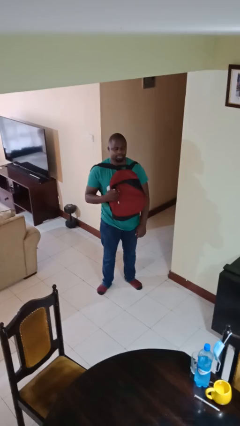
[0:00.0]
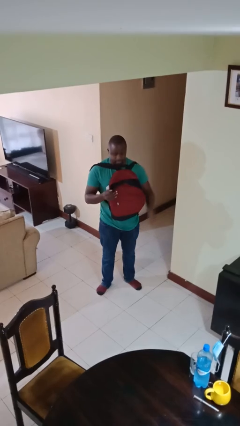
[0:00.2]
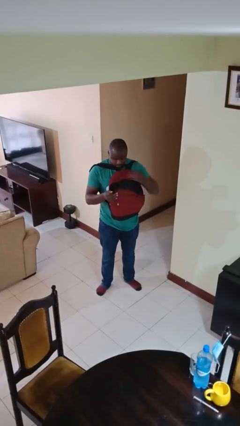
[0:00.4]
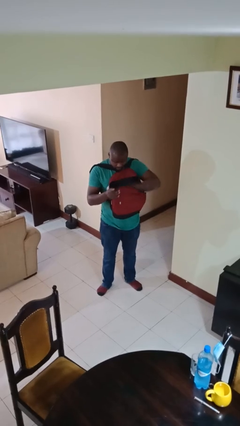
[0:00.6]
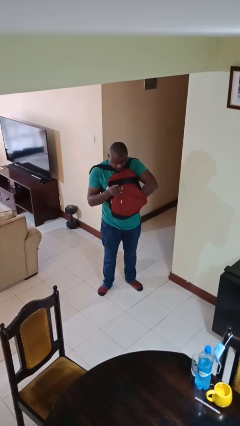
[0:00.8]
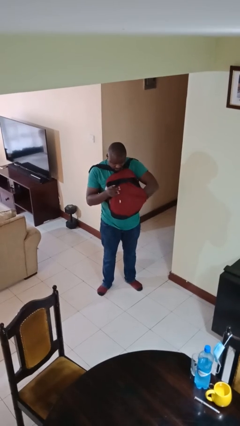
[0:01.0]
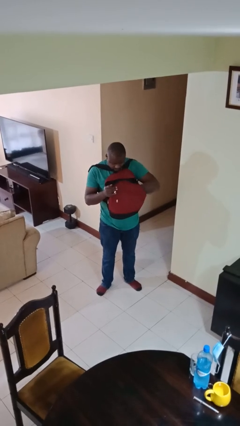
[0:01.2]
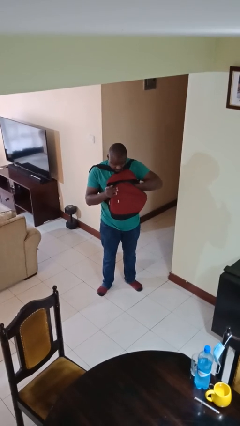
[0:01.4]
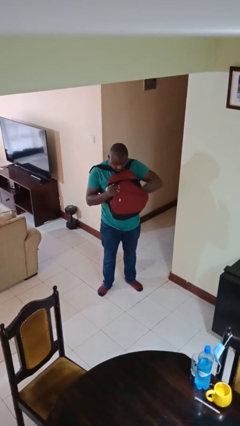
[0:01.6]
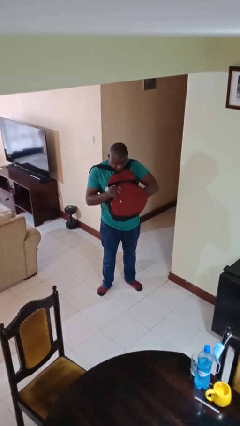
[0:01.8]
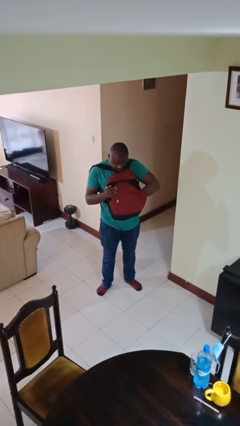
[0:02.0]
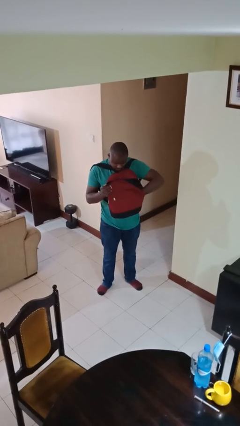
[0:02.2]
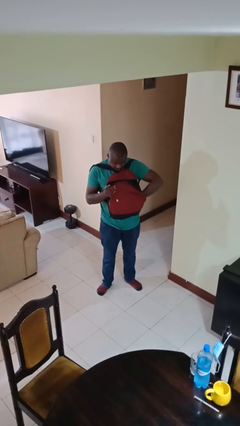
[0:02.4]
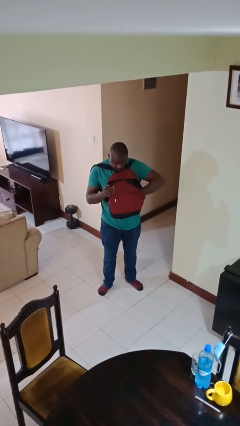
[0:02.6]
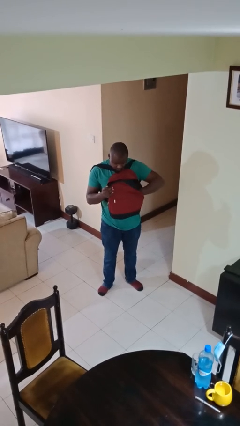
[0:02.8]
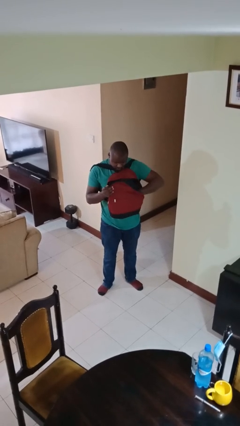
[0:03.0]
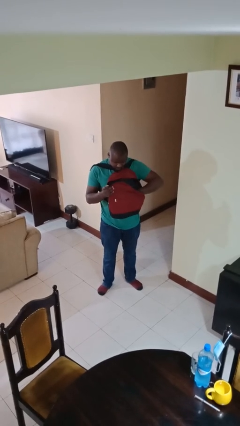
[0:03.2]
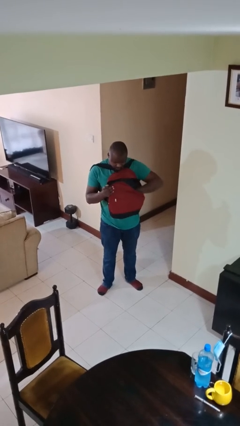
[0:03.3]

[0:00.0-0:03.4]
person searches in backpack

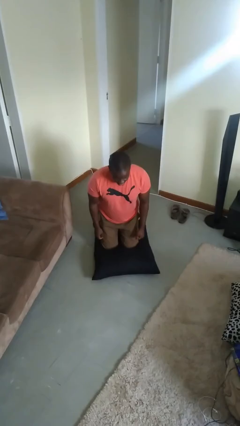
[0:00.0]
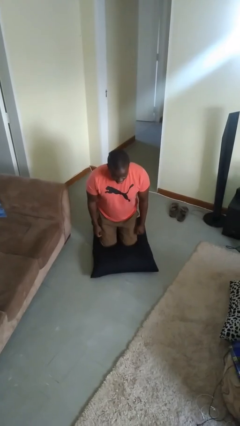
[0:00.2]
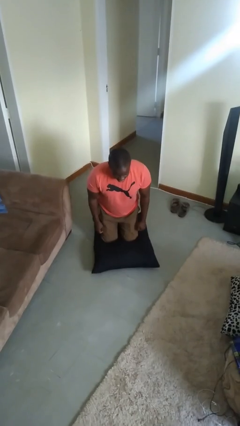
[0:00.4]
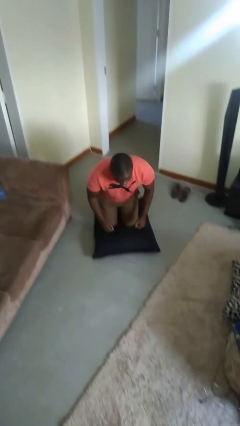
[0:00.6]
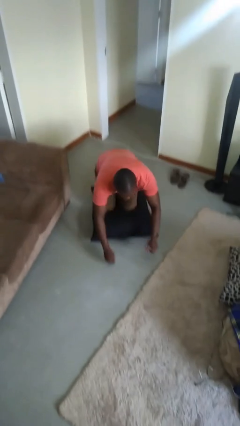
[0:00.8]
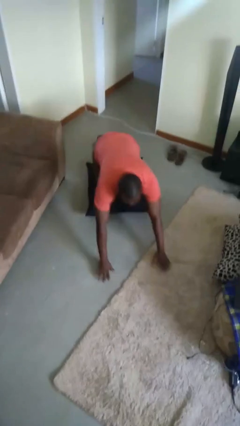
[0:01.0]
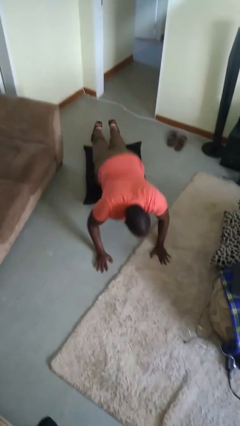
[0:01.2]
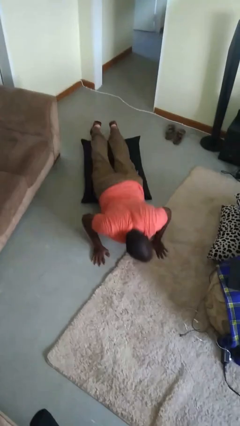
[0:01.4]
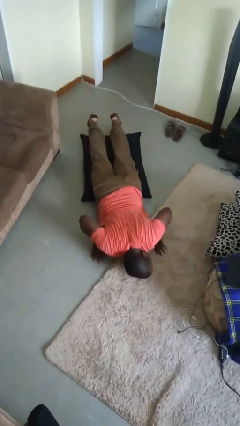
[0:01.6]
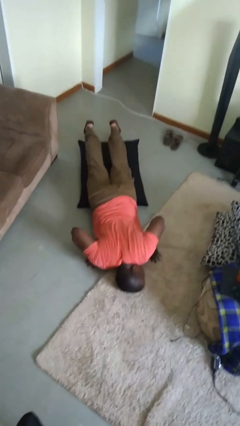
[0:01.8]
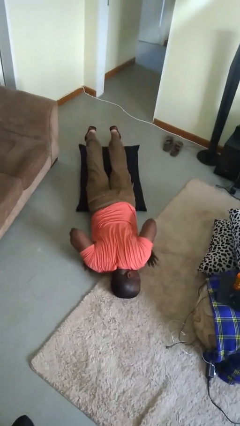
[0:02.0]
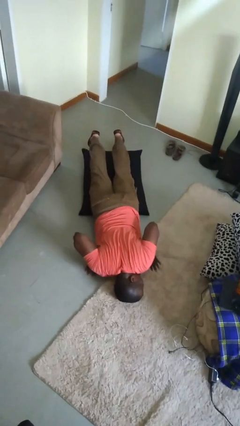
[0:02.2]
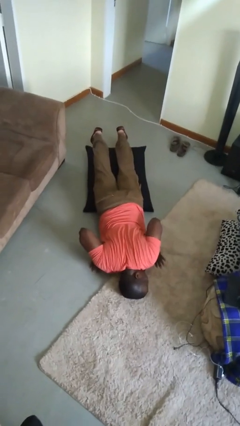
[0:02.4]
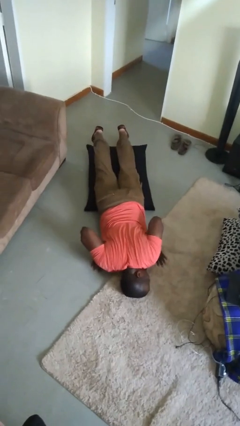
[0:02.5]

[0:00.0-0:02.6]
person lies down on floor

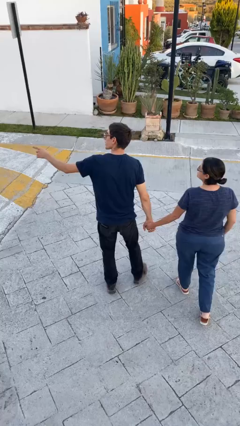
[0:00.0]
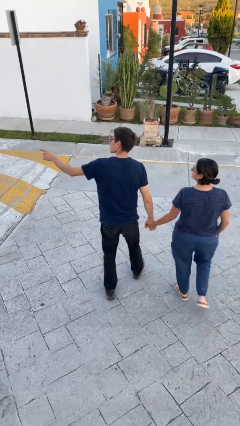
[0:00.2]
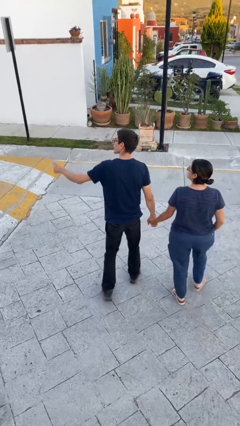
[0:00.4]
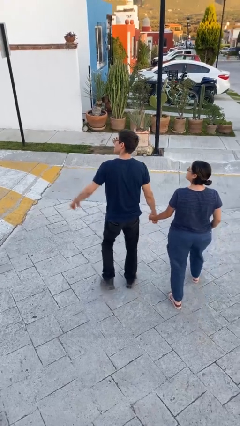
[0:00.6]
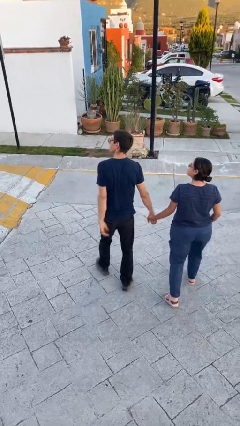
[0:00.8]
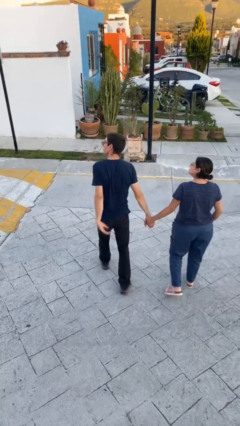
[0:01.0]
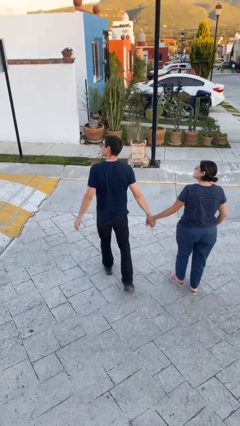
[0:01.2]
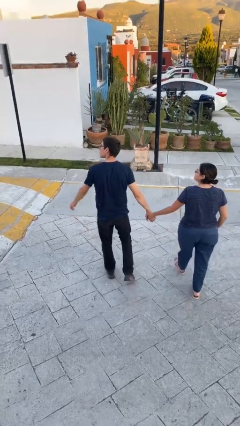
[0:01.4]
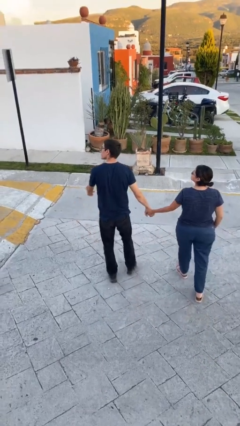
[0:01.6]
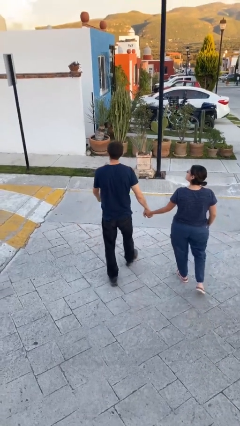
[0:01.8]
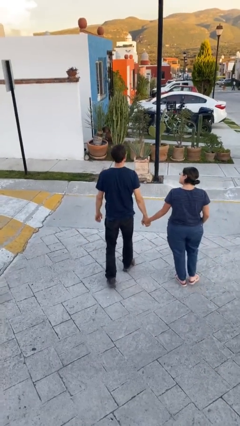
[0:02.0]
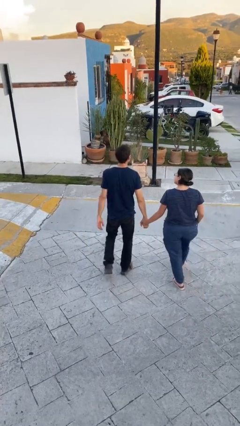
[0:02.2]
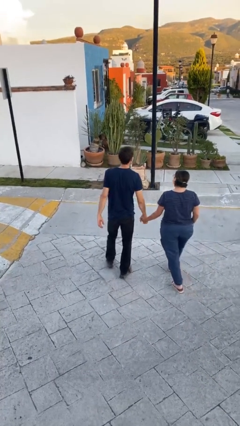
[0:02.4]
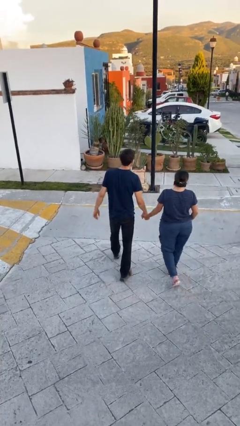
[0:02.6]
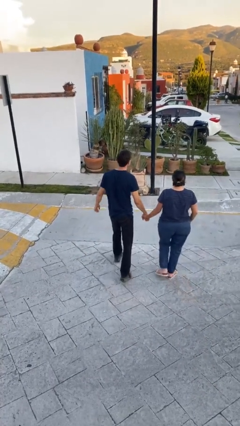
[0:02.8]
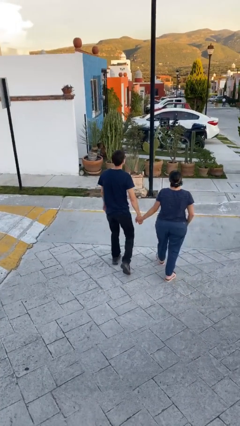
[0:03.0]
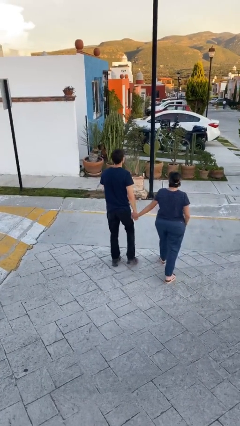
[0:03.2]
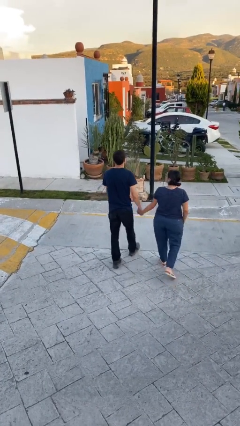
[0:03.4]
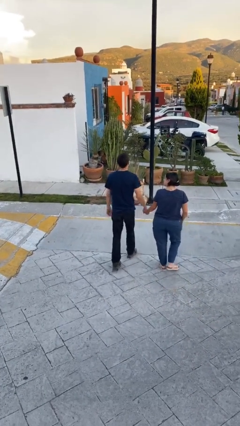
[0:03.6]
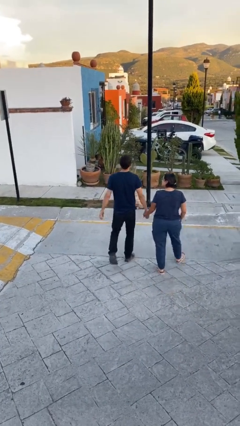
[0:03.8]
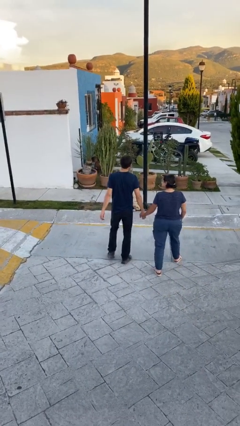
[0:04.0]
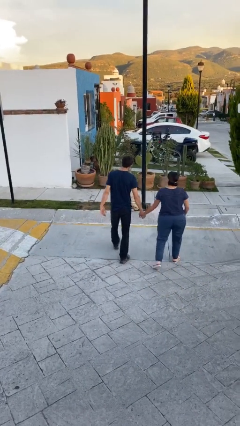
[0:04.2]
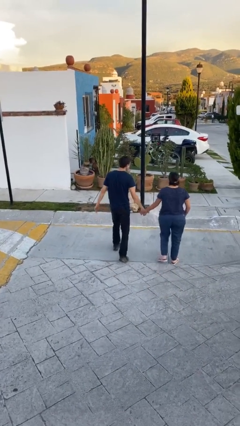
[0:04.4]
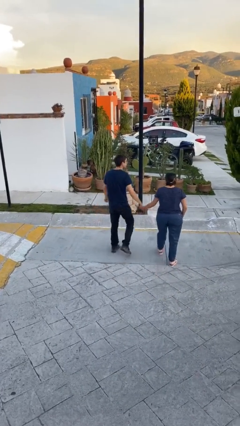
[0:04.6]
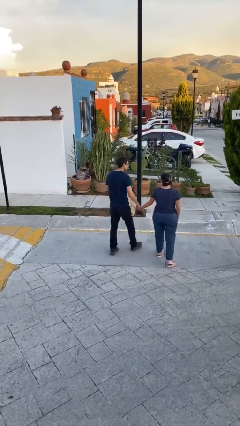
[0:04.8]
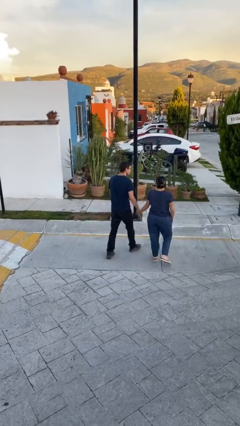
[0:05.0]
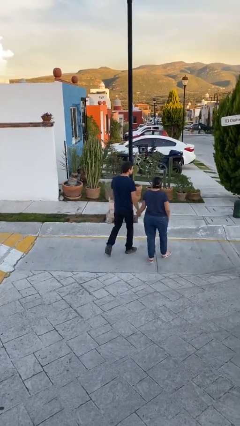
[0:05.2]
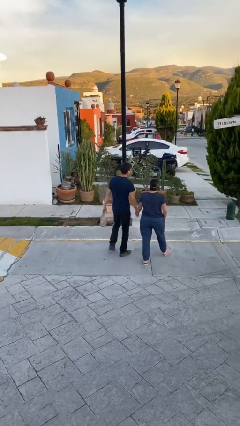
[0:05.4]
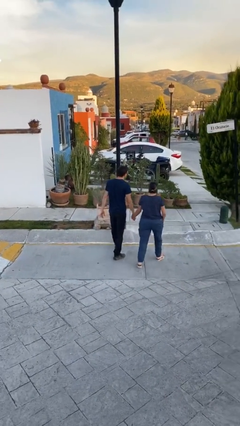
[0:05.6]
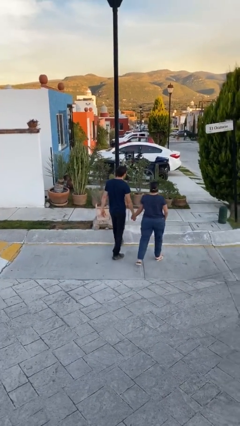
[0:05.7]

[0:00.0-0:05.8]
person holds hand

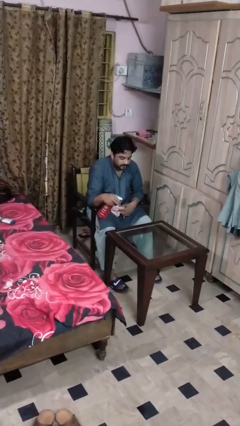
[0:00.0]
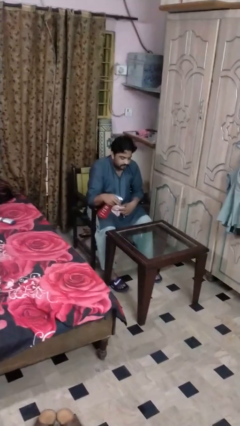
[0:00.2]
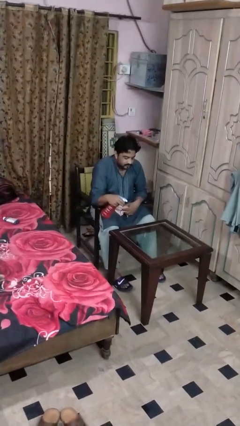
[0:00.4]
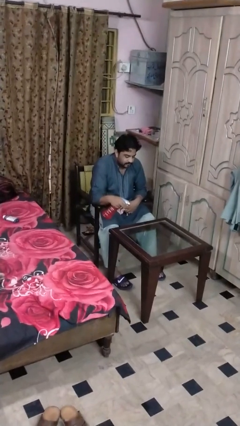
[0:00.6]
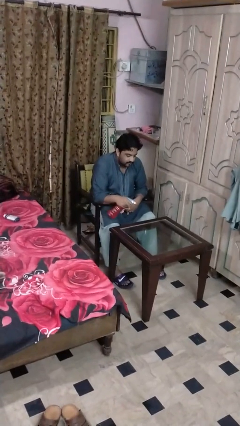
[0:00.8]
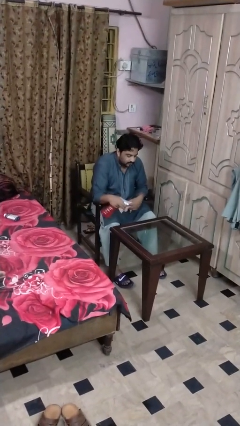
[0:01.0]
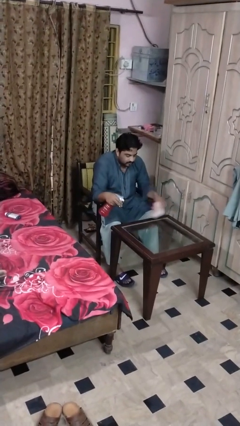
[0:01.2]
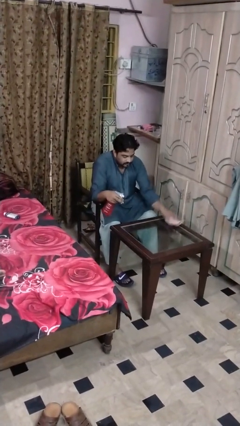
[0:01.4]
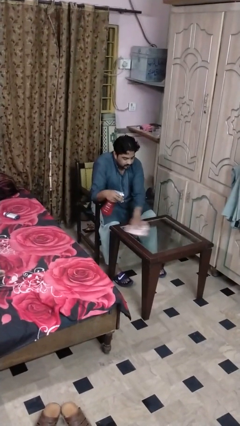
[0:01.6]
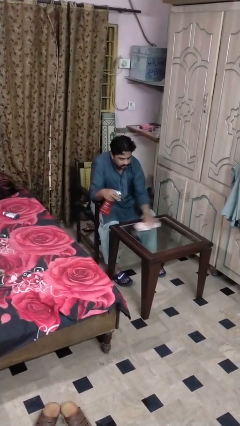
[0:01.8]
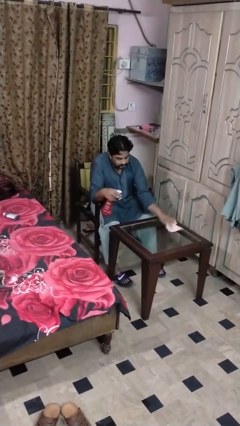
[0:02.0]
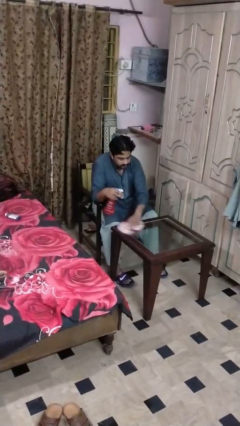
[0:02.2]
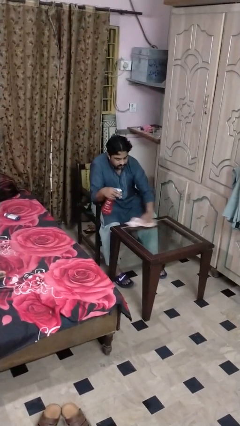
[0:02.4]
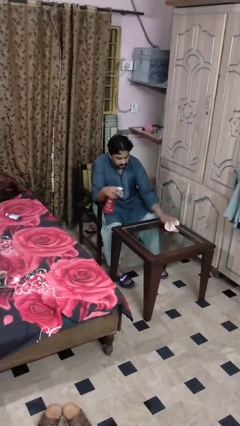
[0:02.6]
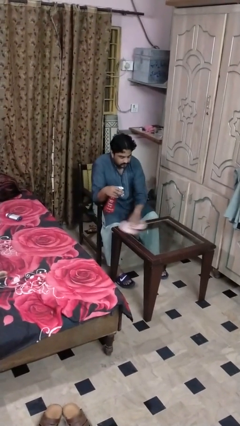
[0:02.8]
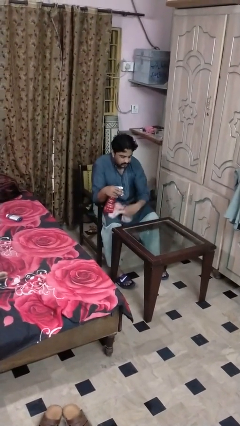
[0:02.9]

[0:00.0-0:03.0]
person cleans table with rag

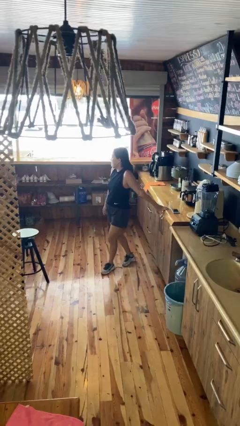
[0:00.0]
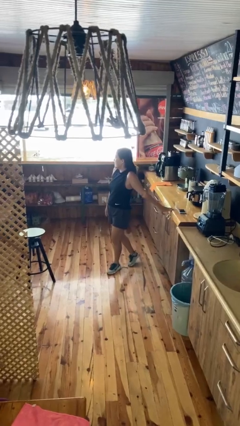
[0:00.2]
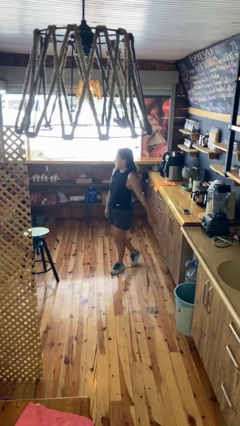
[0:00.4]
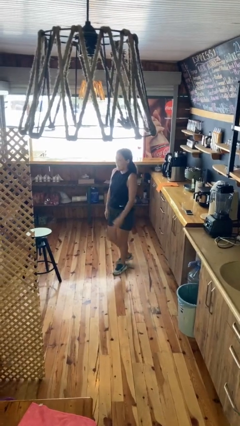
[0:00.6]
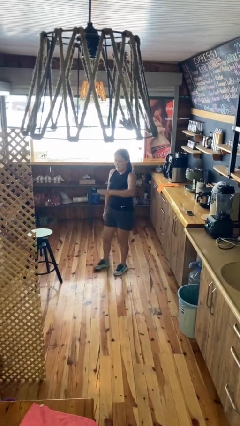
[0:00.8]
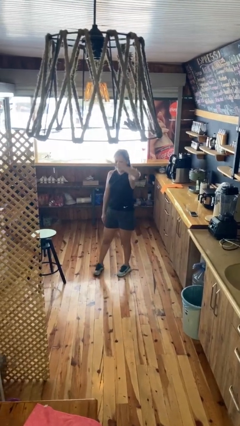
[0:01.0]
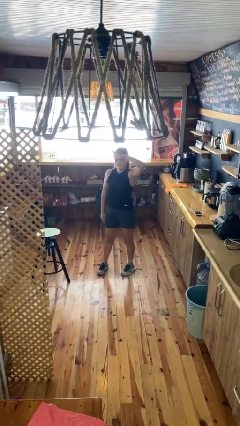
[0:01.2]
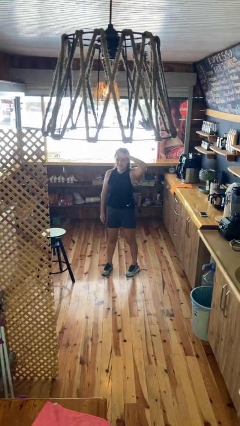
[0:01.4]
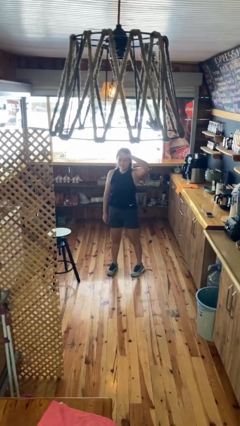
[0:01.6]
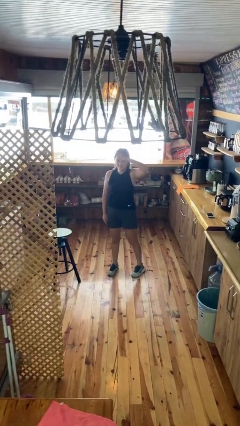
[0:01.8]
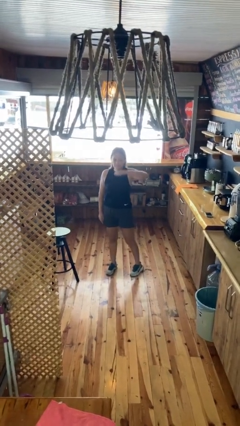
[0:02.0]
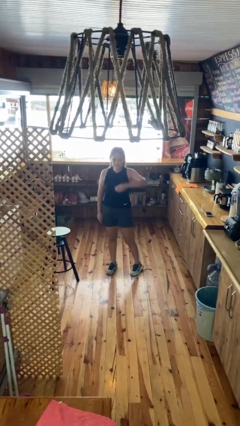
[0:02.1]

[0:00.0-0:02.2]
person salutes

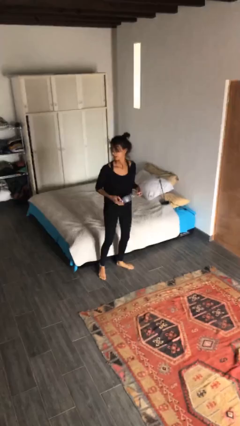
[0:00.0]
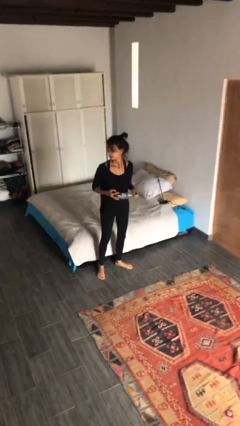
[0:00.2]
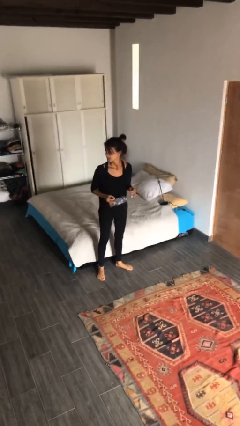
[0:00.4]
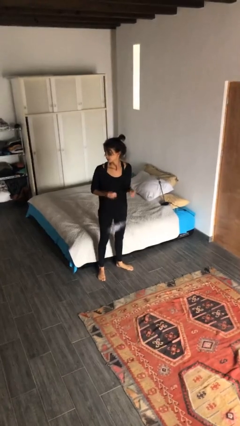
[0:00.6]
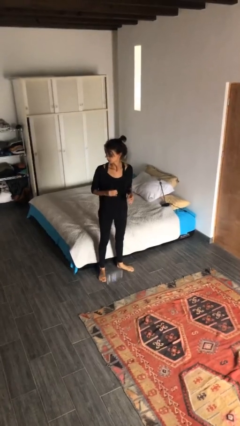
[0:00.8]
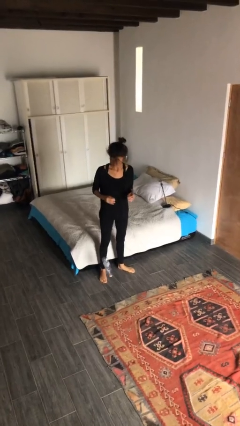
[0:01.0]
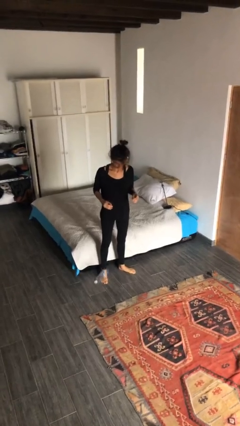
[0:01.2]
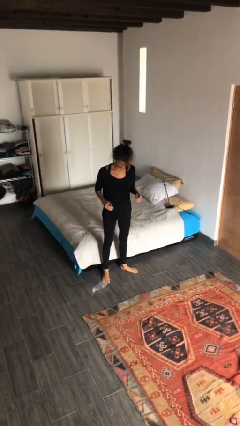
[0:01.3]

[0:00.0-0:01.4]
person drops object
